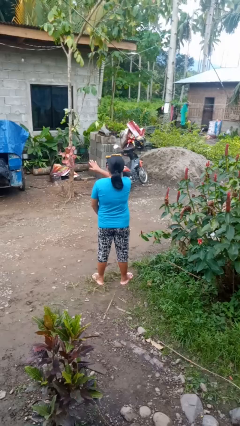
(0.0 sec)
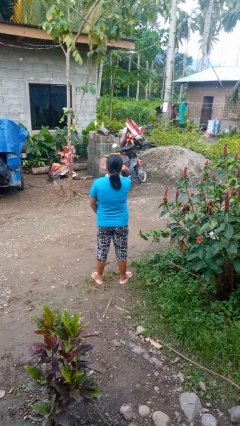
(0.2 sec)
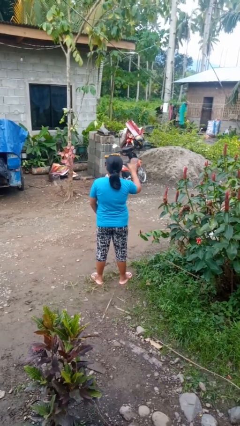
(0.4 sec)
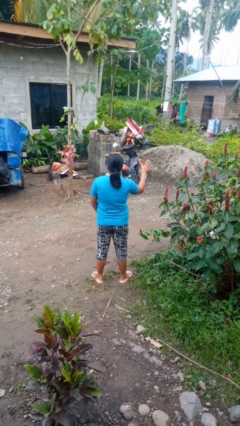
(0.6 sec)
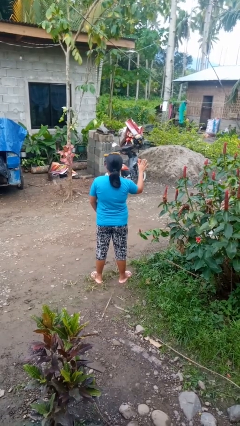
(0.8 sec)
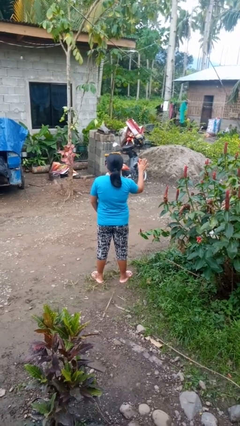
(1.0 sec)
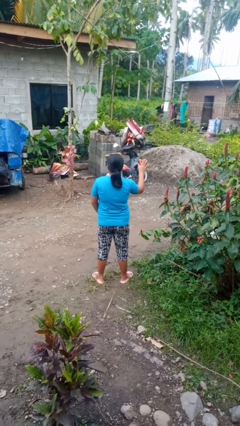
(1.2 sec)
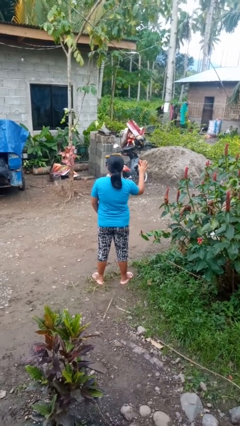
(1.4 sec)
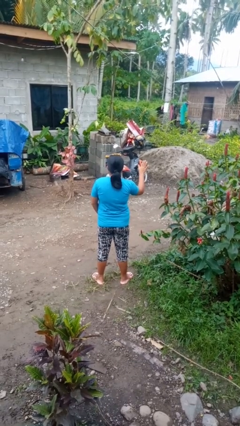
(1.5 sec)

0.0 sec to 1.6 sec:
person gestures swipe right

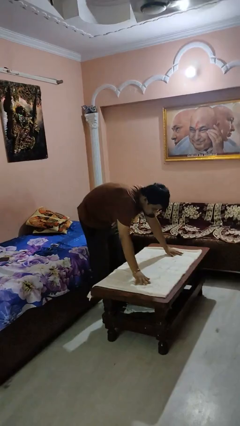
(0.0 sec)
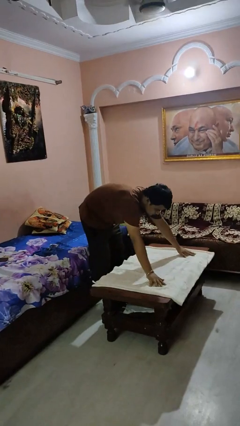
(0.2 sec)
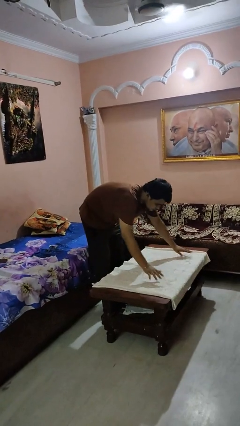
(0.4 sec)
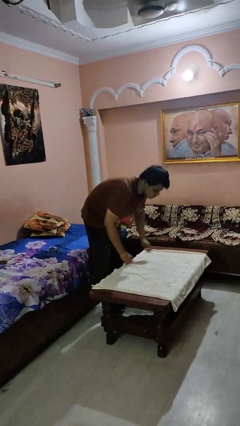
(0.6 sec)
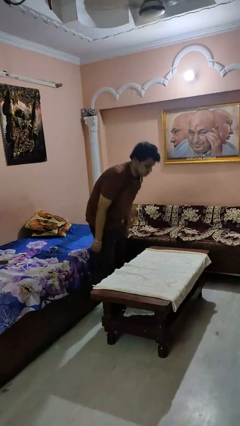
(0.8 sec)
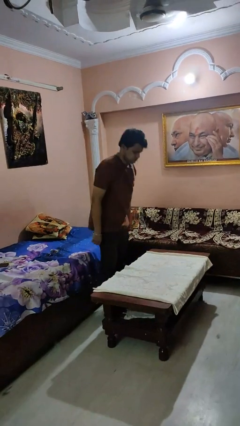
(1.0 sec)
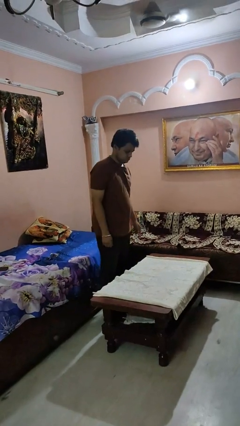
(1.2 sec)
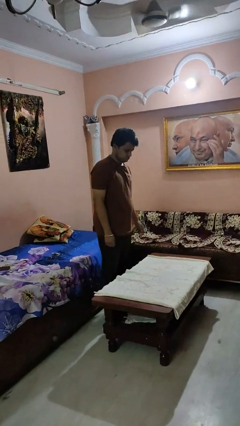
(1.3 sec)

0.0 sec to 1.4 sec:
person spreads tablecloth

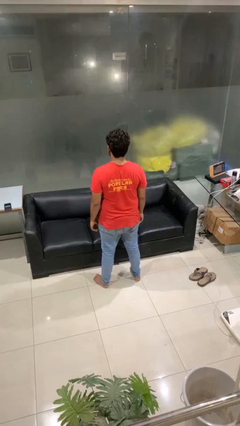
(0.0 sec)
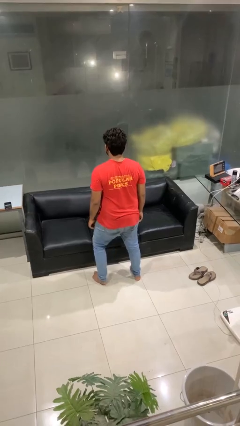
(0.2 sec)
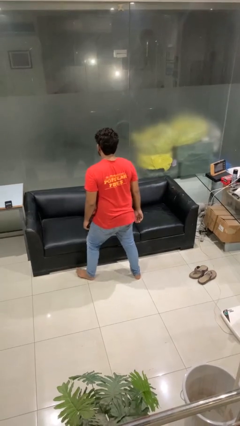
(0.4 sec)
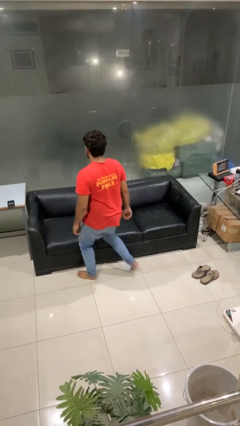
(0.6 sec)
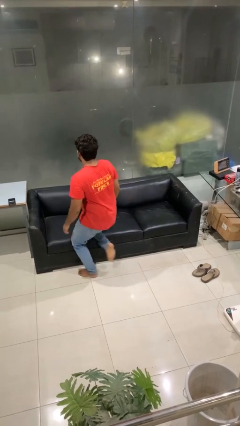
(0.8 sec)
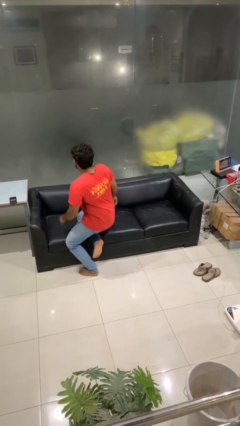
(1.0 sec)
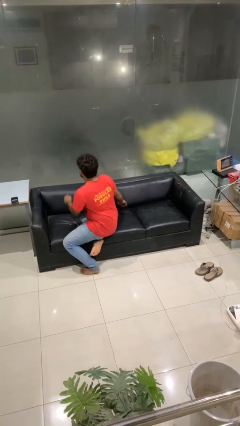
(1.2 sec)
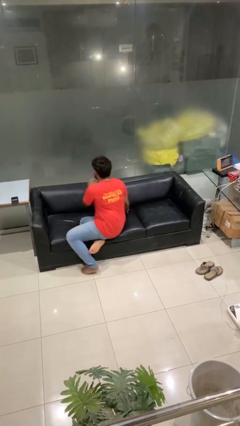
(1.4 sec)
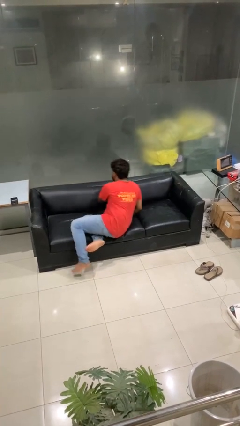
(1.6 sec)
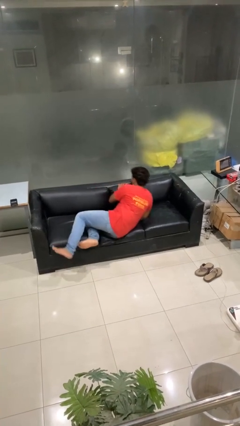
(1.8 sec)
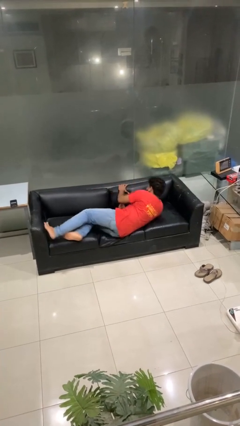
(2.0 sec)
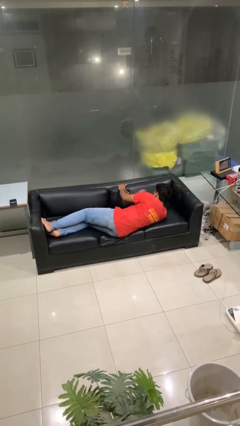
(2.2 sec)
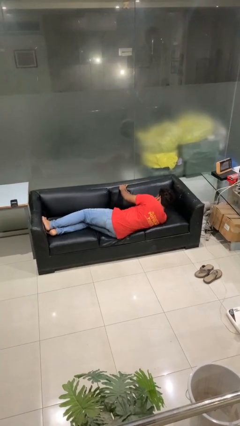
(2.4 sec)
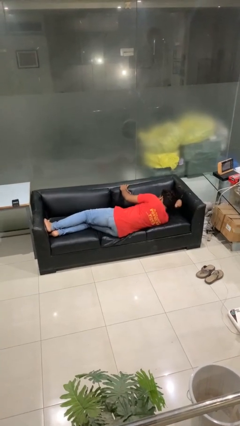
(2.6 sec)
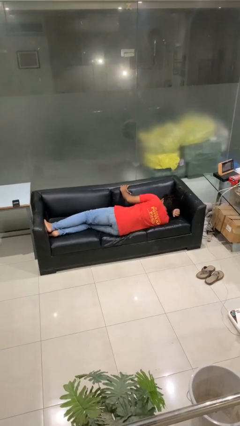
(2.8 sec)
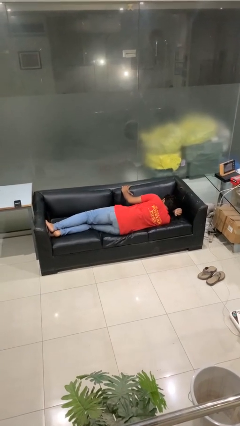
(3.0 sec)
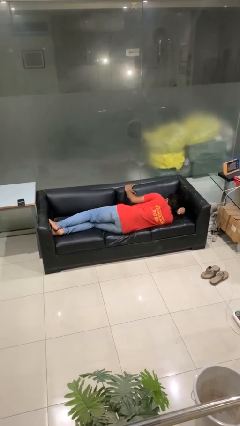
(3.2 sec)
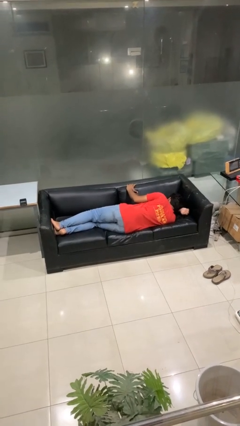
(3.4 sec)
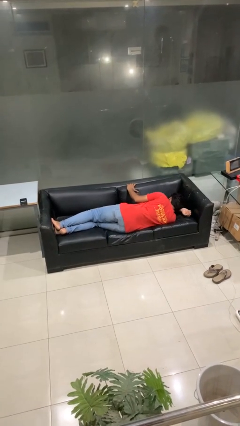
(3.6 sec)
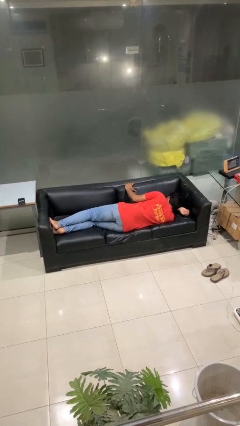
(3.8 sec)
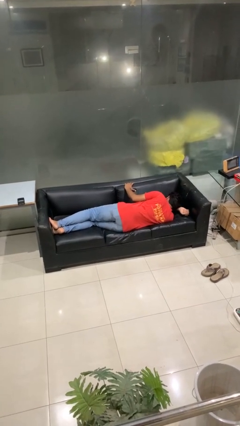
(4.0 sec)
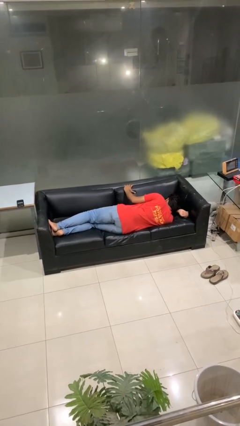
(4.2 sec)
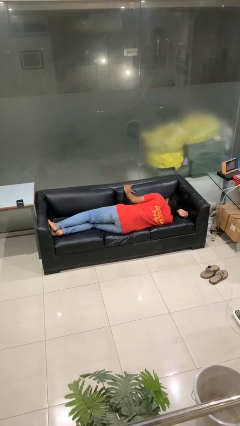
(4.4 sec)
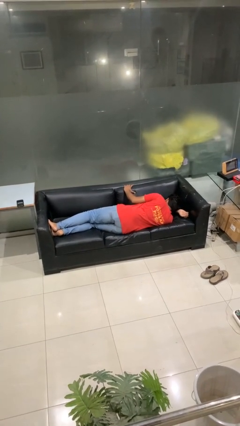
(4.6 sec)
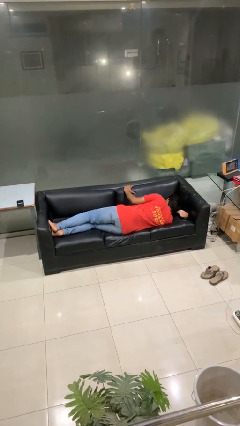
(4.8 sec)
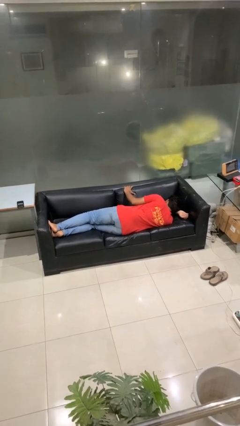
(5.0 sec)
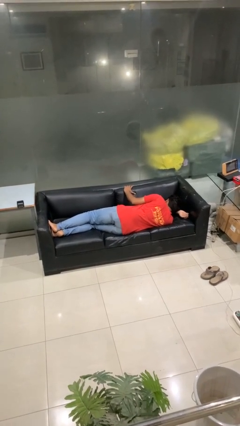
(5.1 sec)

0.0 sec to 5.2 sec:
person lies down on couch

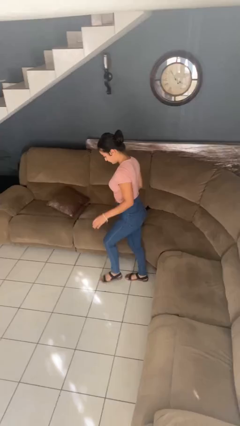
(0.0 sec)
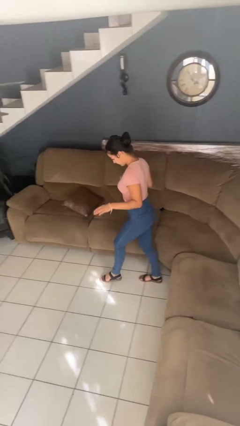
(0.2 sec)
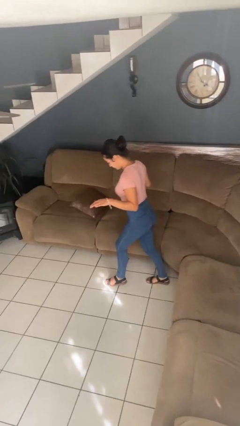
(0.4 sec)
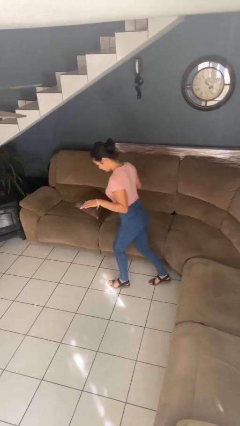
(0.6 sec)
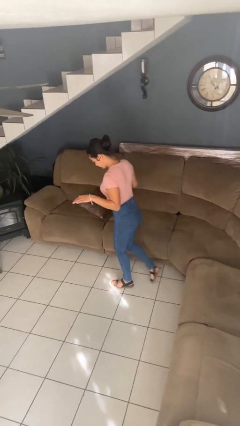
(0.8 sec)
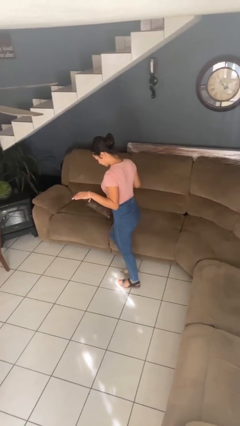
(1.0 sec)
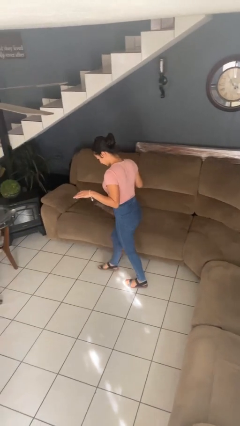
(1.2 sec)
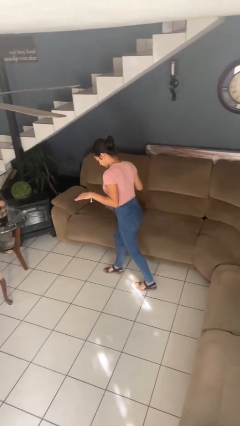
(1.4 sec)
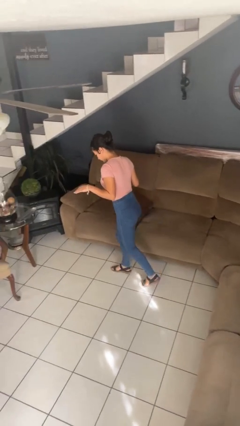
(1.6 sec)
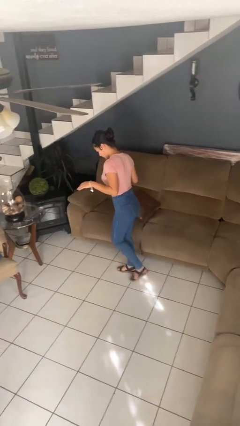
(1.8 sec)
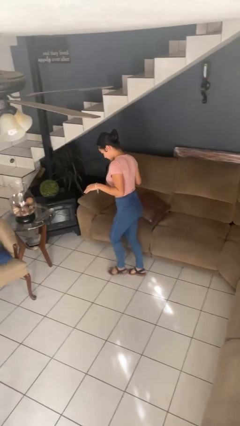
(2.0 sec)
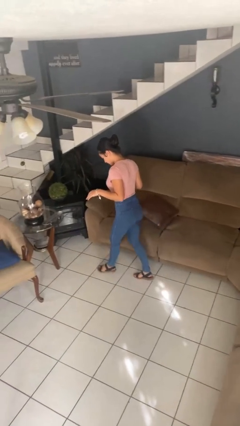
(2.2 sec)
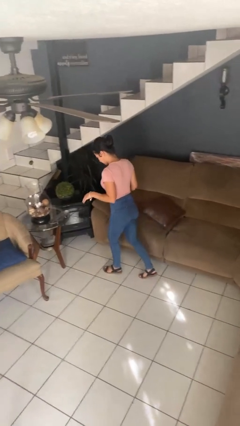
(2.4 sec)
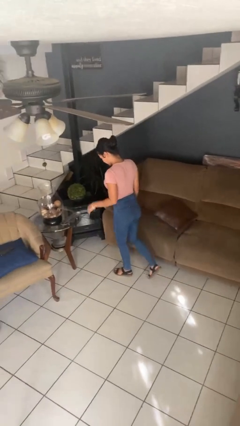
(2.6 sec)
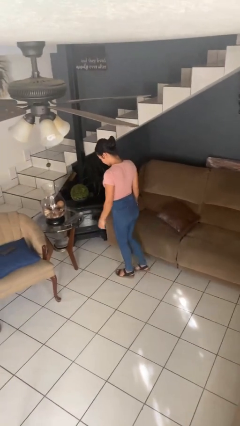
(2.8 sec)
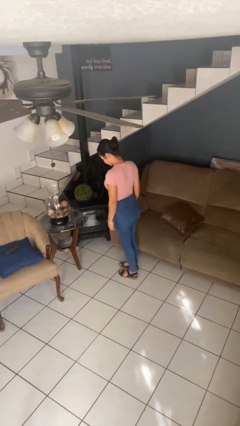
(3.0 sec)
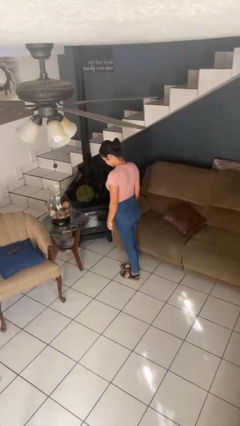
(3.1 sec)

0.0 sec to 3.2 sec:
person walks tiptoe

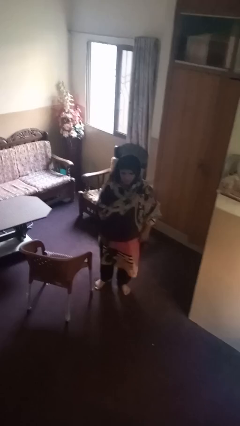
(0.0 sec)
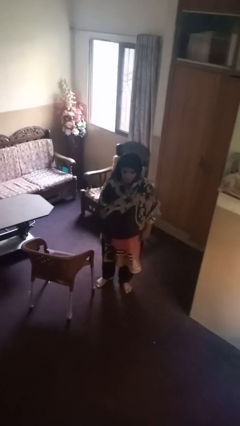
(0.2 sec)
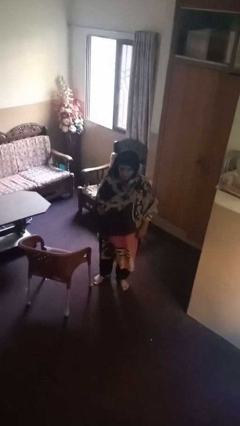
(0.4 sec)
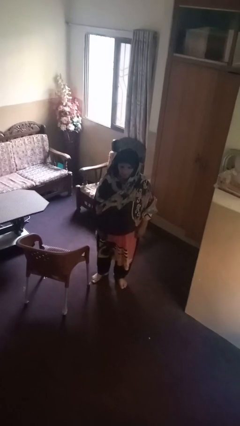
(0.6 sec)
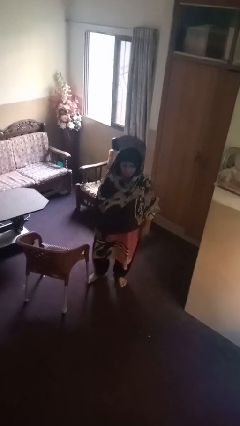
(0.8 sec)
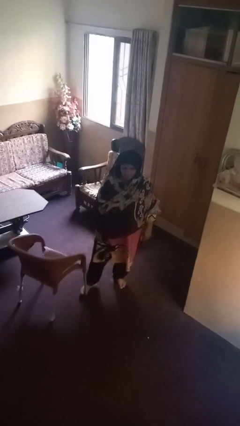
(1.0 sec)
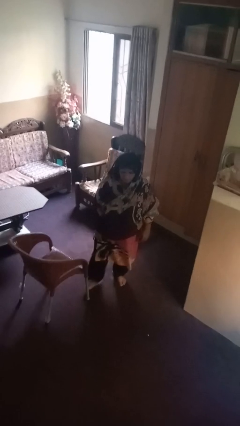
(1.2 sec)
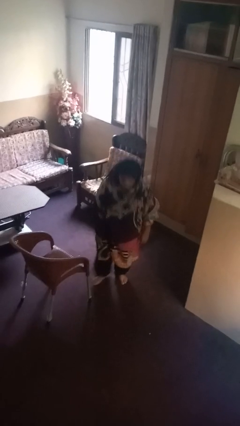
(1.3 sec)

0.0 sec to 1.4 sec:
person trips on object on floor

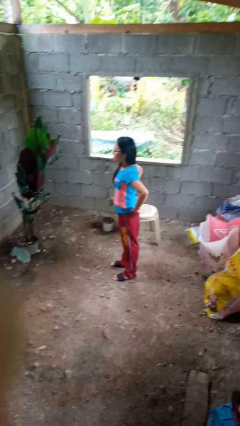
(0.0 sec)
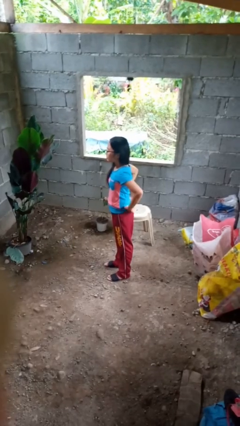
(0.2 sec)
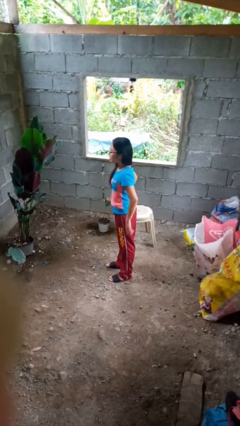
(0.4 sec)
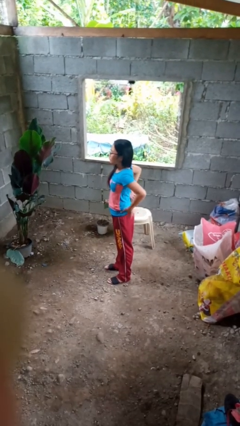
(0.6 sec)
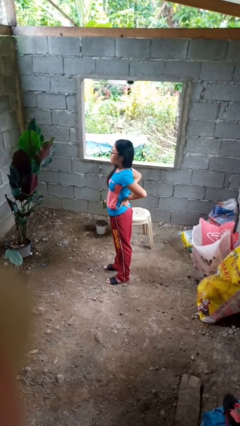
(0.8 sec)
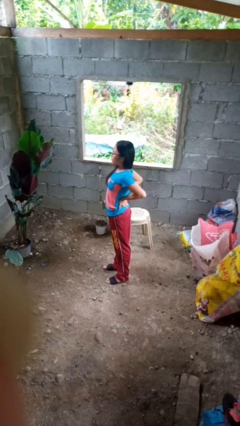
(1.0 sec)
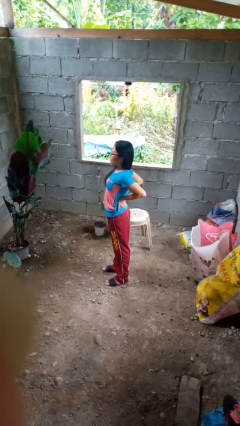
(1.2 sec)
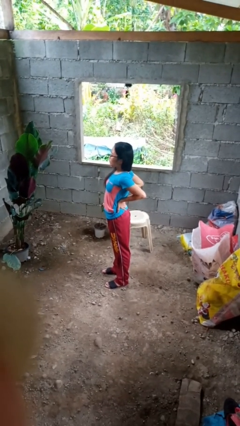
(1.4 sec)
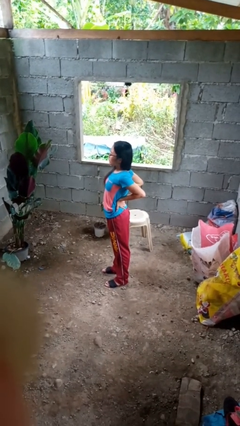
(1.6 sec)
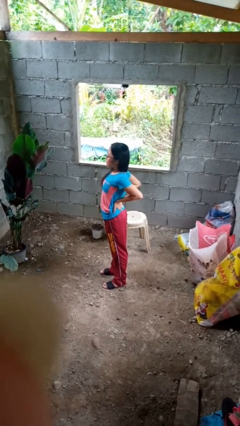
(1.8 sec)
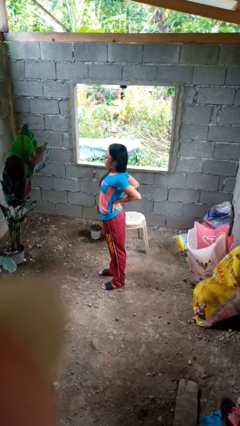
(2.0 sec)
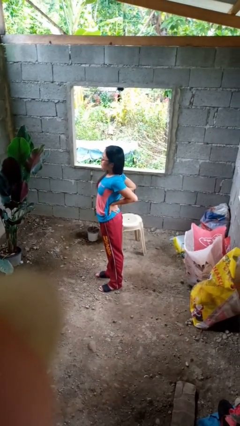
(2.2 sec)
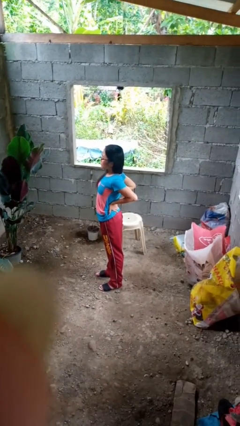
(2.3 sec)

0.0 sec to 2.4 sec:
person stretches back

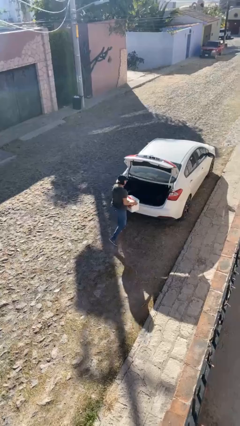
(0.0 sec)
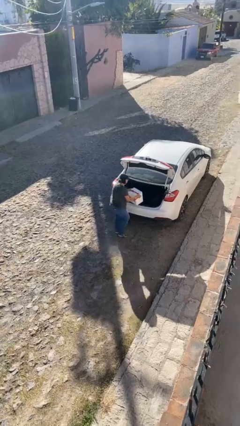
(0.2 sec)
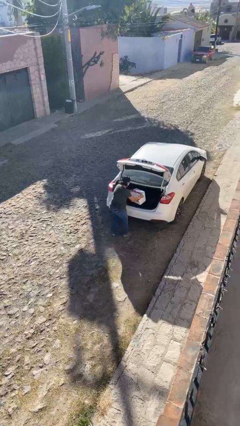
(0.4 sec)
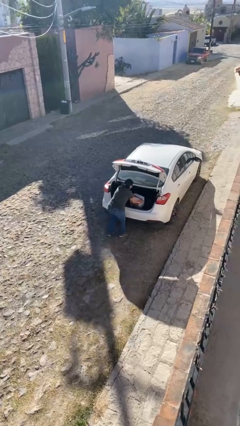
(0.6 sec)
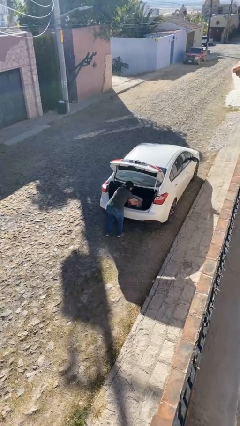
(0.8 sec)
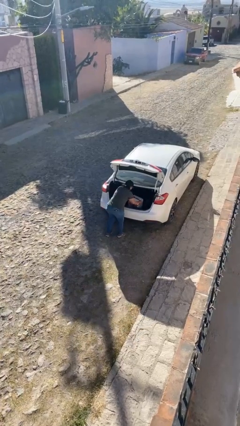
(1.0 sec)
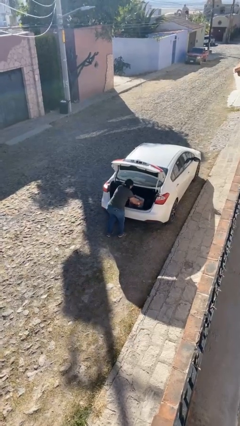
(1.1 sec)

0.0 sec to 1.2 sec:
person loads car

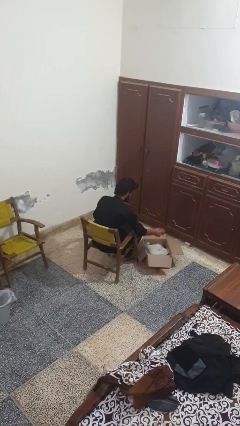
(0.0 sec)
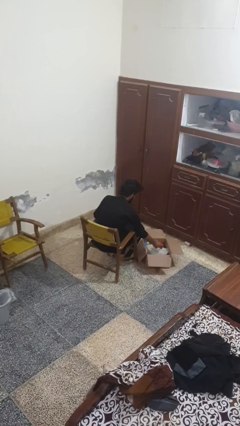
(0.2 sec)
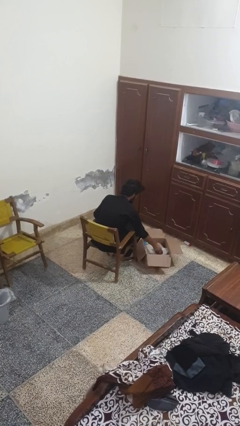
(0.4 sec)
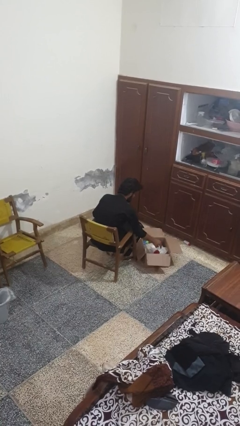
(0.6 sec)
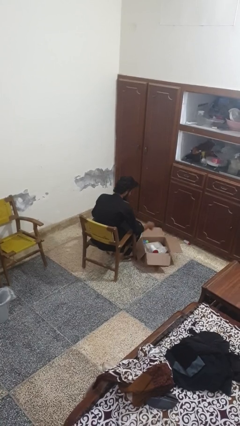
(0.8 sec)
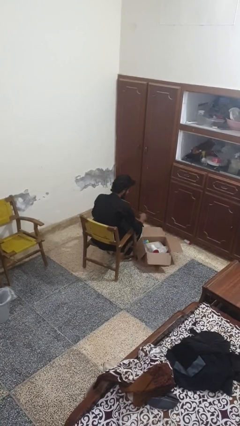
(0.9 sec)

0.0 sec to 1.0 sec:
person puts object into box
